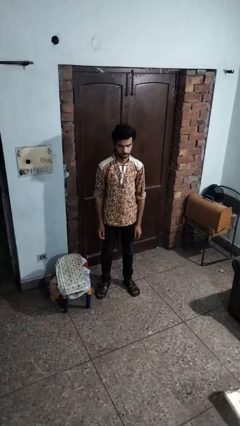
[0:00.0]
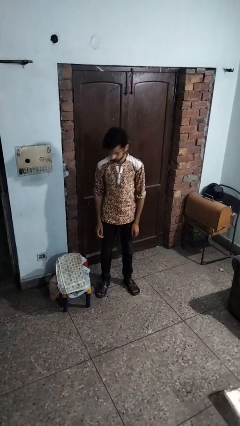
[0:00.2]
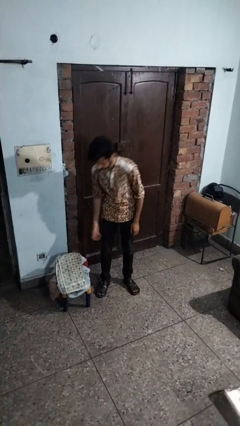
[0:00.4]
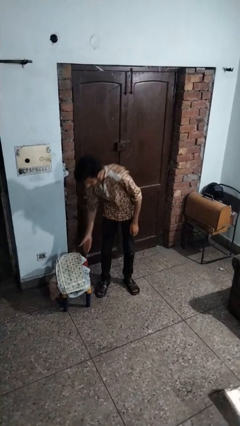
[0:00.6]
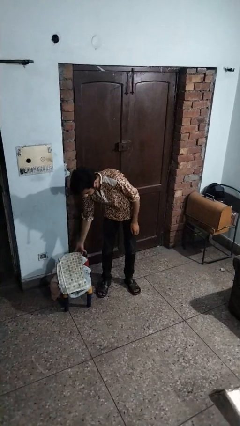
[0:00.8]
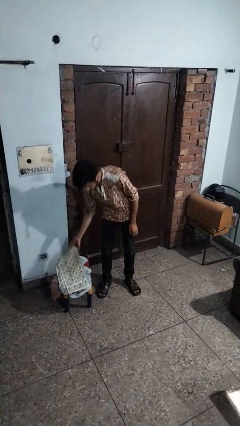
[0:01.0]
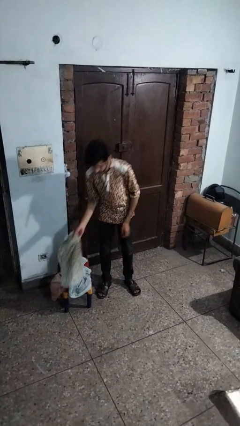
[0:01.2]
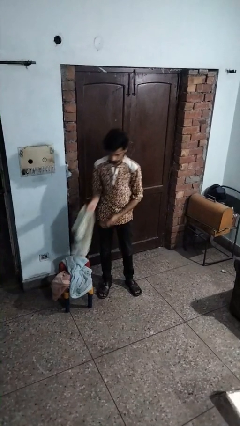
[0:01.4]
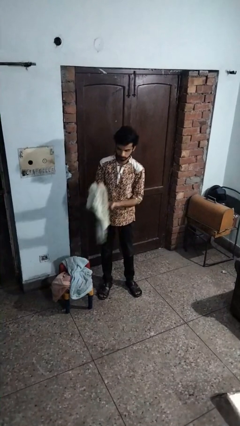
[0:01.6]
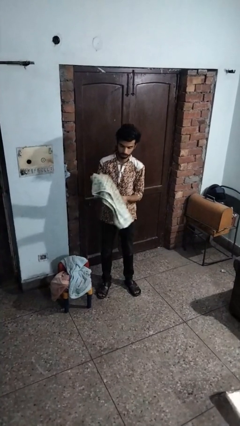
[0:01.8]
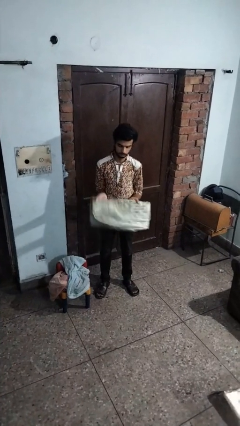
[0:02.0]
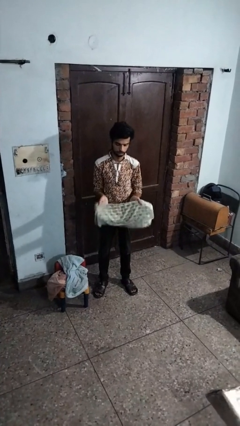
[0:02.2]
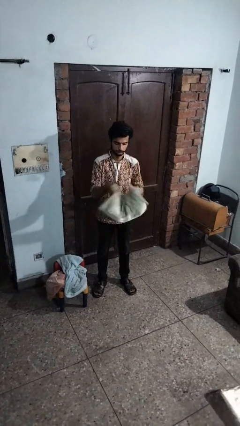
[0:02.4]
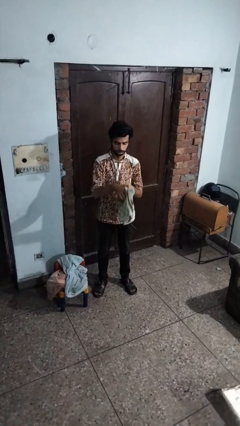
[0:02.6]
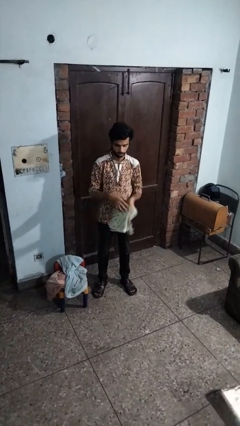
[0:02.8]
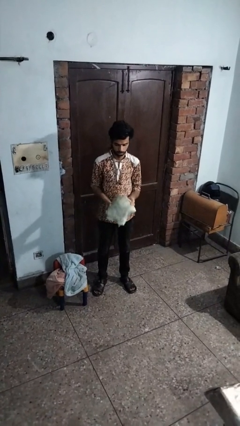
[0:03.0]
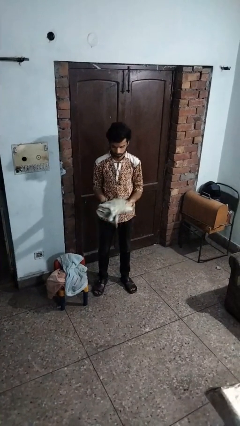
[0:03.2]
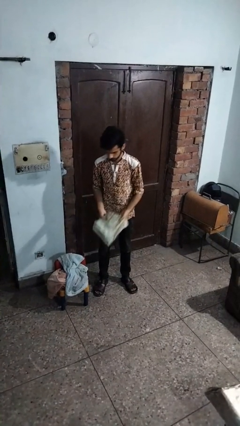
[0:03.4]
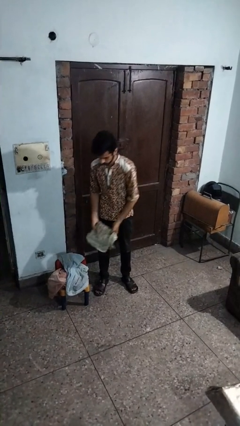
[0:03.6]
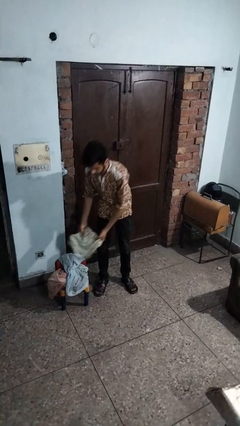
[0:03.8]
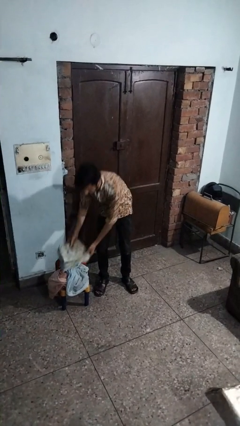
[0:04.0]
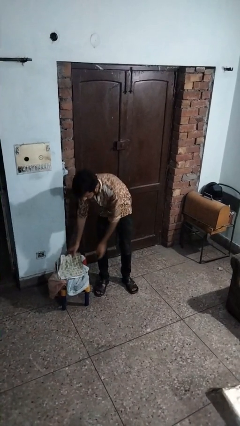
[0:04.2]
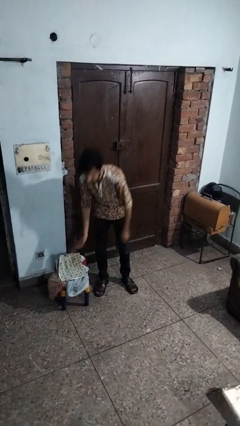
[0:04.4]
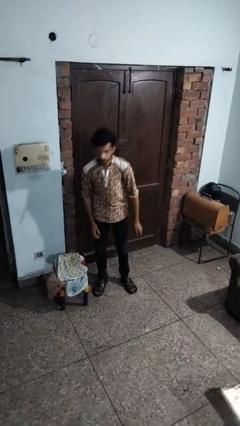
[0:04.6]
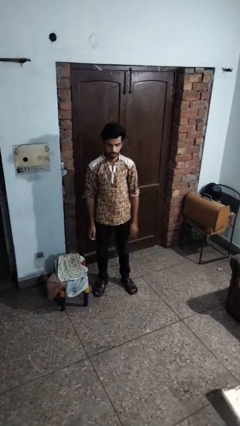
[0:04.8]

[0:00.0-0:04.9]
person folds towel

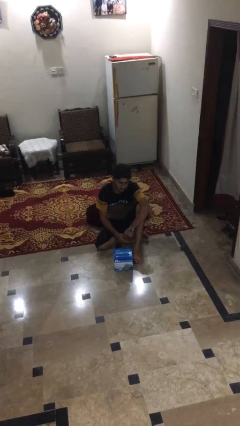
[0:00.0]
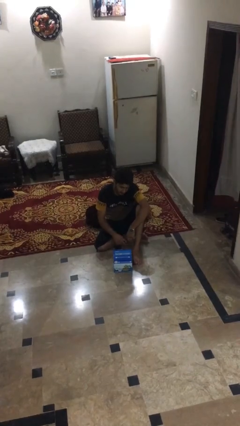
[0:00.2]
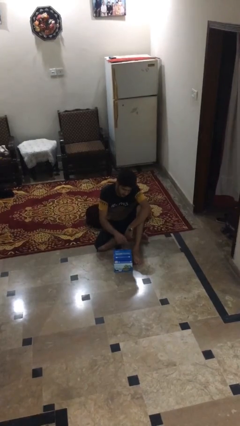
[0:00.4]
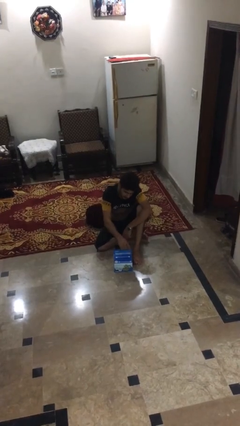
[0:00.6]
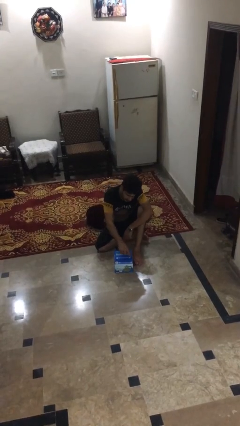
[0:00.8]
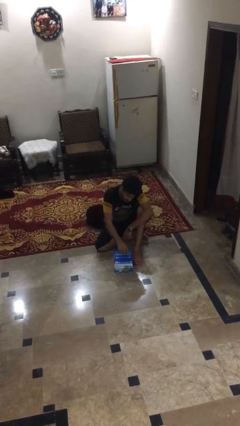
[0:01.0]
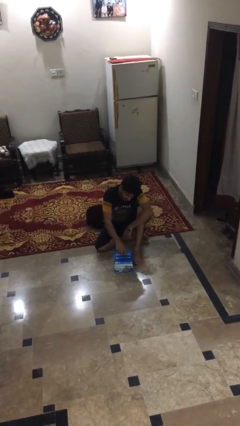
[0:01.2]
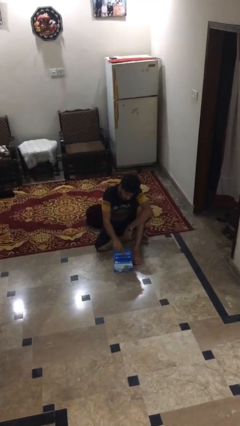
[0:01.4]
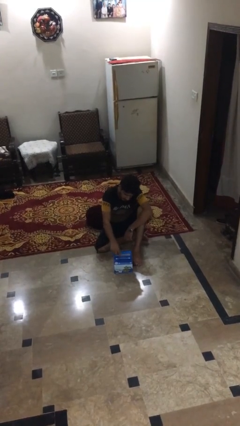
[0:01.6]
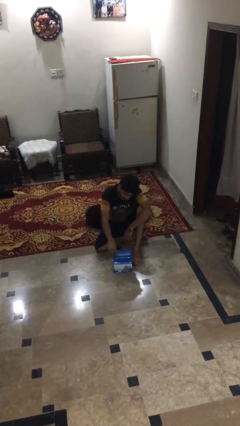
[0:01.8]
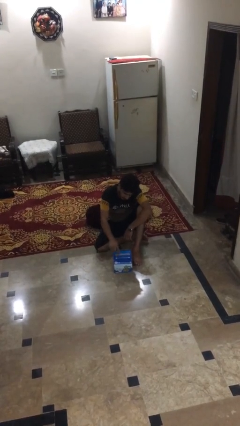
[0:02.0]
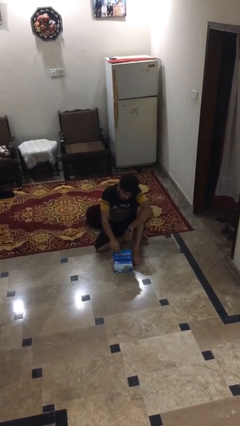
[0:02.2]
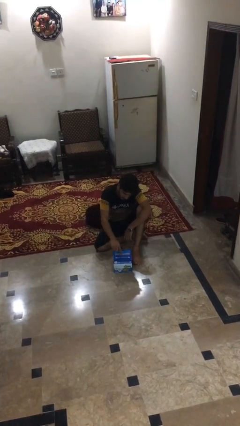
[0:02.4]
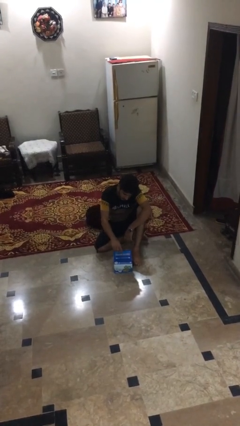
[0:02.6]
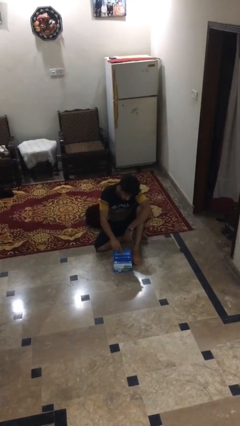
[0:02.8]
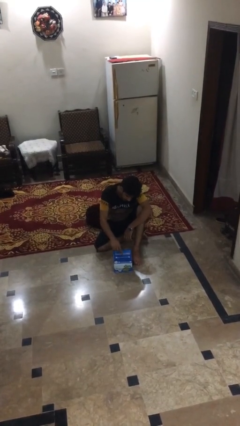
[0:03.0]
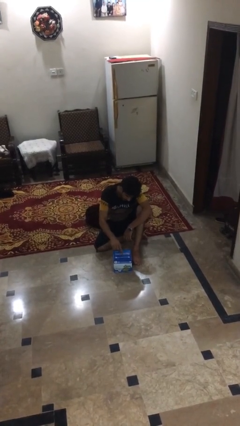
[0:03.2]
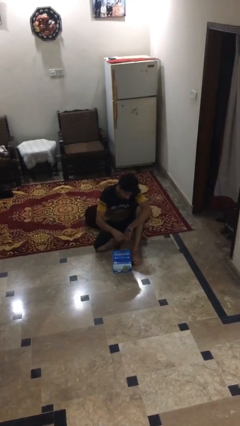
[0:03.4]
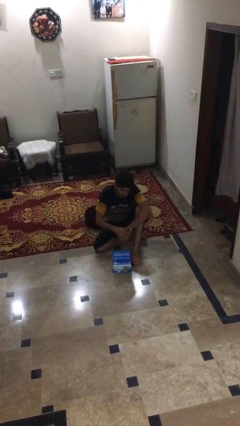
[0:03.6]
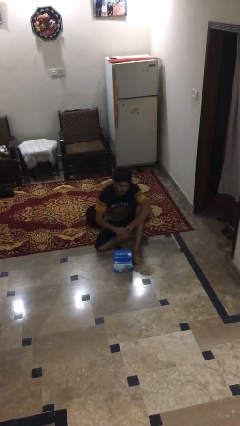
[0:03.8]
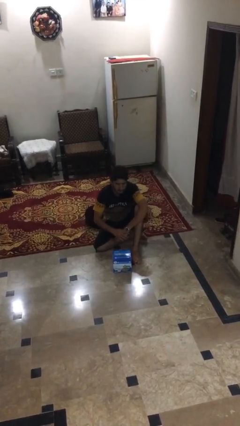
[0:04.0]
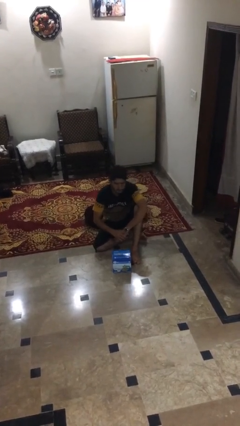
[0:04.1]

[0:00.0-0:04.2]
person taps object with finger

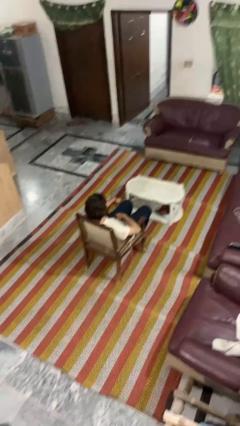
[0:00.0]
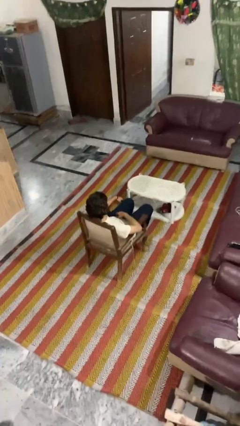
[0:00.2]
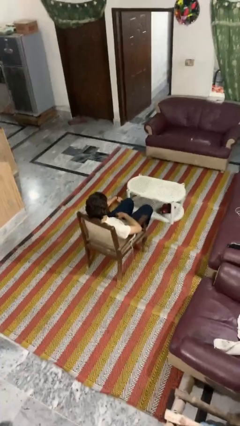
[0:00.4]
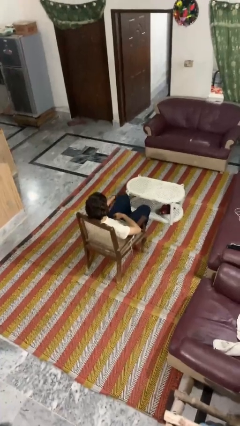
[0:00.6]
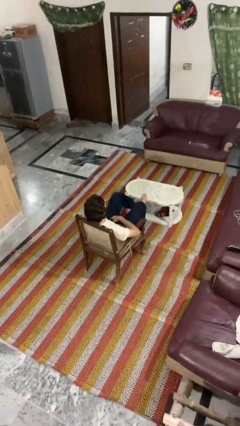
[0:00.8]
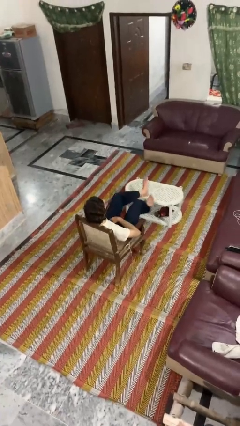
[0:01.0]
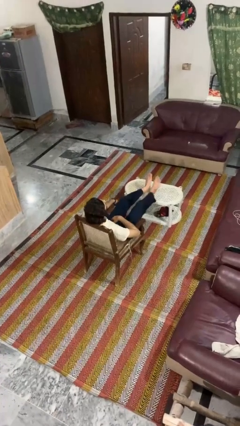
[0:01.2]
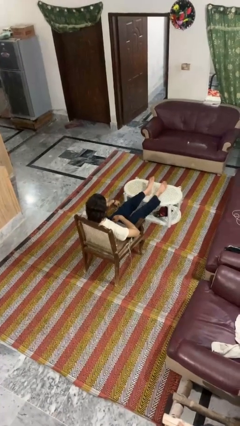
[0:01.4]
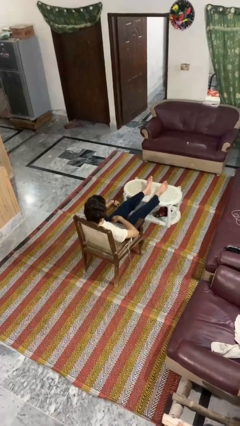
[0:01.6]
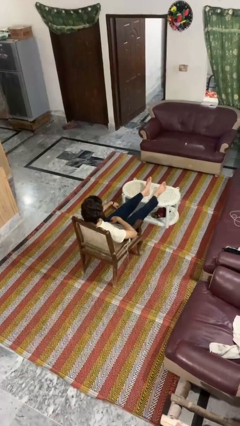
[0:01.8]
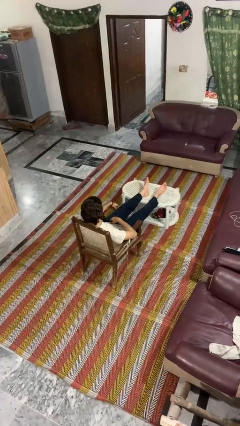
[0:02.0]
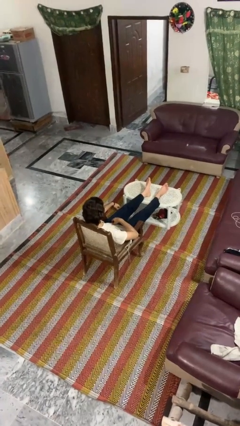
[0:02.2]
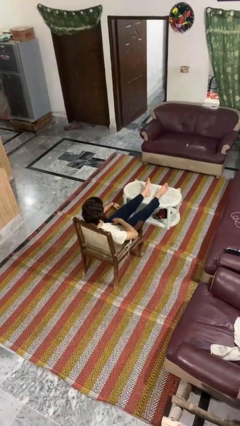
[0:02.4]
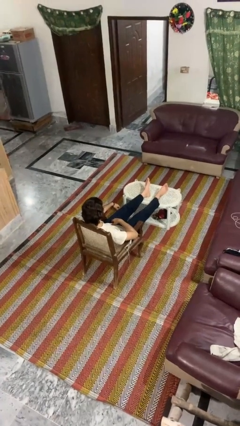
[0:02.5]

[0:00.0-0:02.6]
person puts feet up

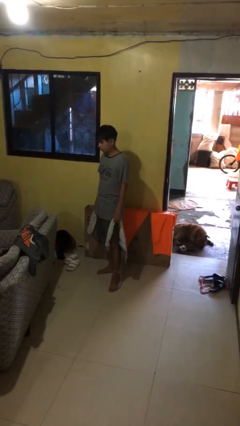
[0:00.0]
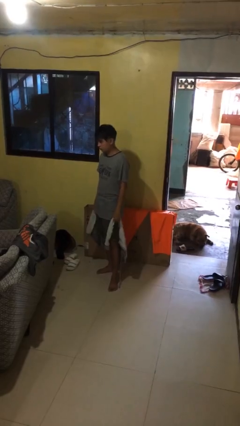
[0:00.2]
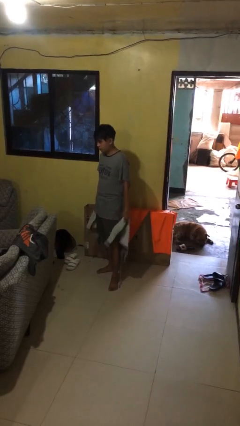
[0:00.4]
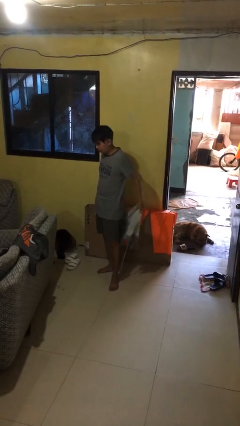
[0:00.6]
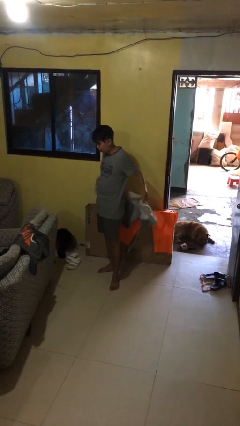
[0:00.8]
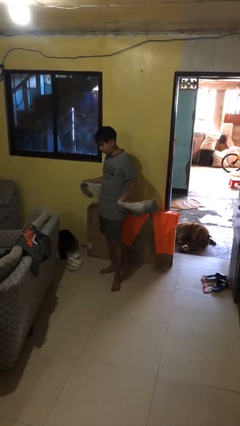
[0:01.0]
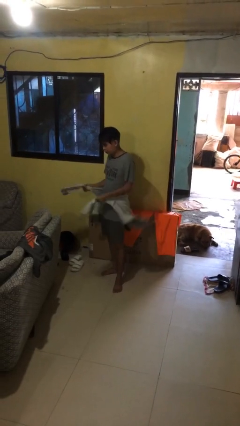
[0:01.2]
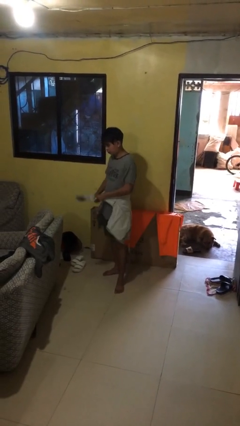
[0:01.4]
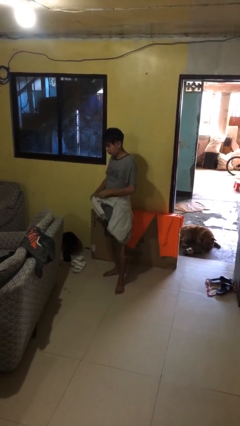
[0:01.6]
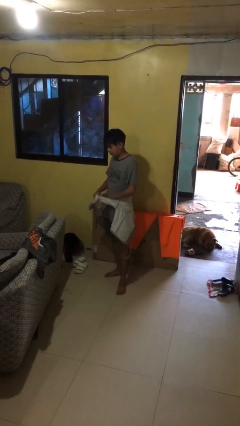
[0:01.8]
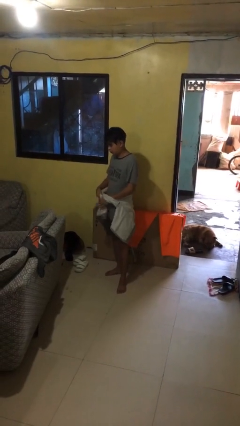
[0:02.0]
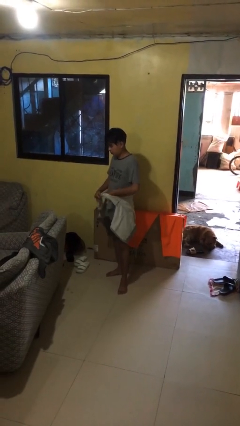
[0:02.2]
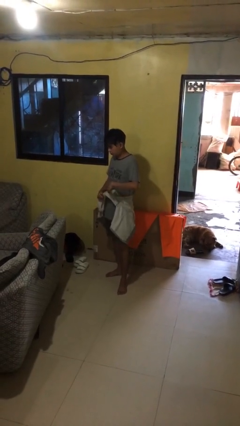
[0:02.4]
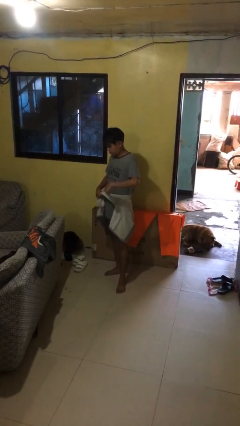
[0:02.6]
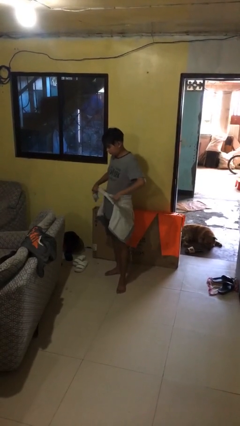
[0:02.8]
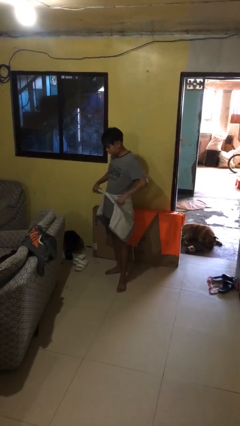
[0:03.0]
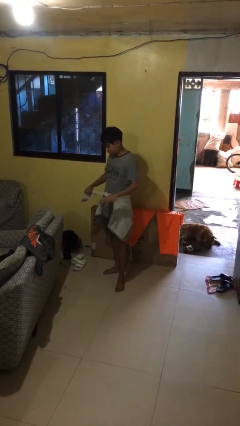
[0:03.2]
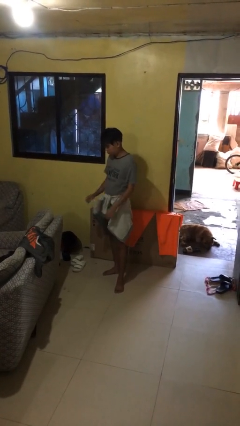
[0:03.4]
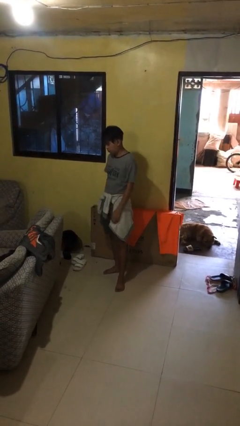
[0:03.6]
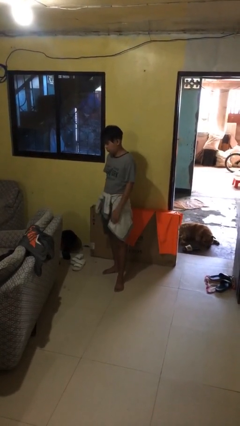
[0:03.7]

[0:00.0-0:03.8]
person ties jacket around waist

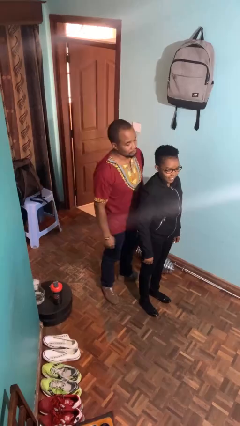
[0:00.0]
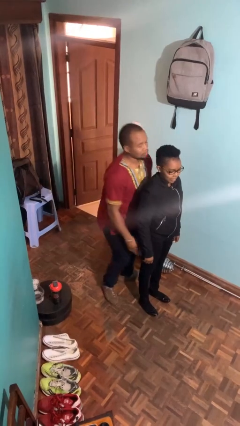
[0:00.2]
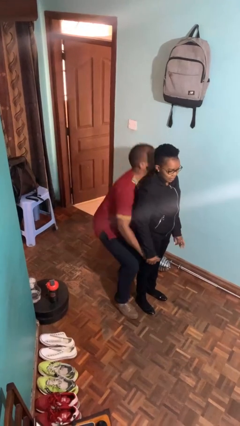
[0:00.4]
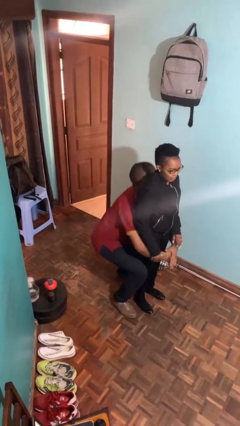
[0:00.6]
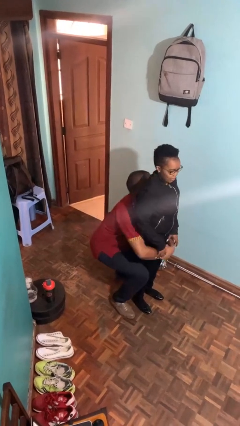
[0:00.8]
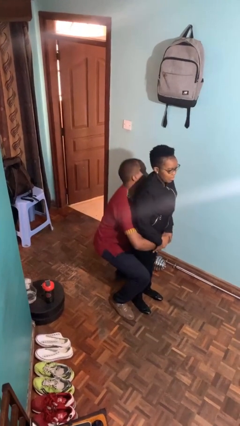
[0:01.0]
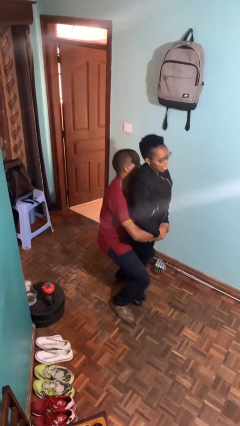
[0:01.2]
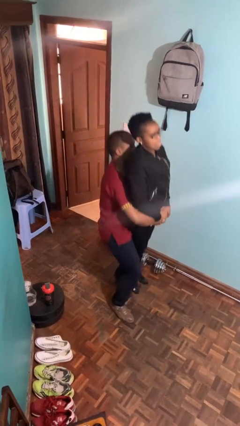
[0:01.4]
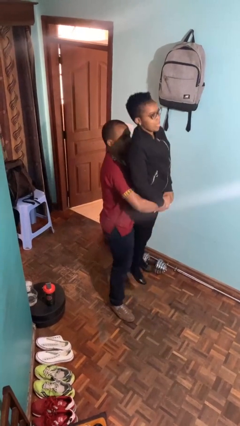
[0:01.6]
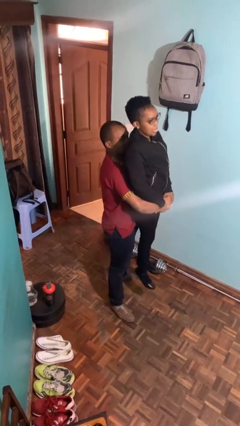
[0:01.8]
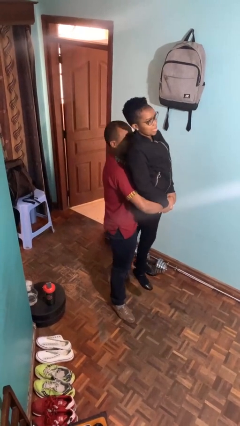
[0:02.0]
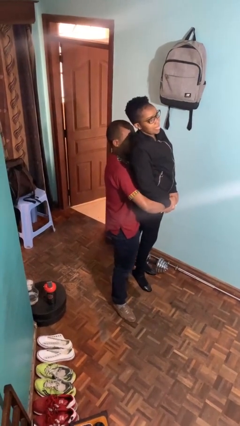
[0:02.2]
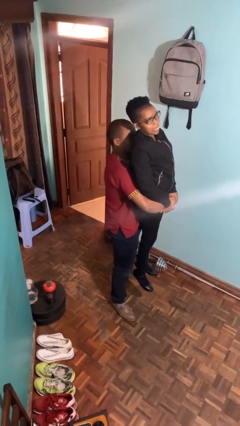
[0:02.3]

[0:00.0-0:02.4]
person picks up person
